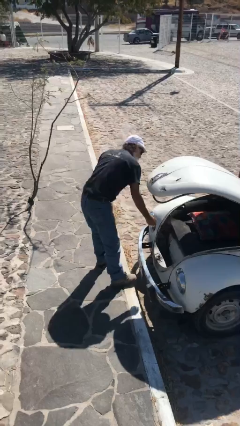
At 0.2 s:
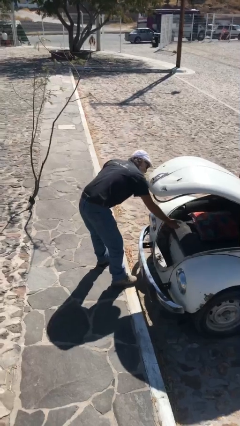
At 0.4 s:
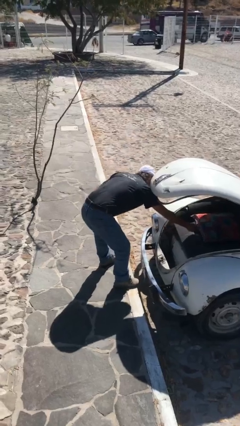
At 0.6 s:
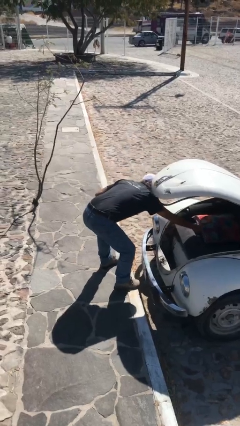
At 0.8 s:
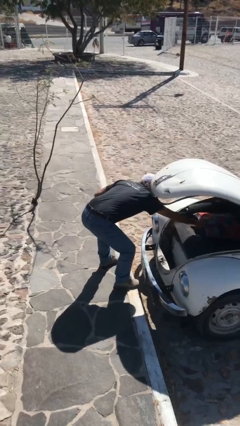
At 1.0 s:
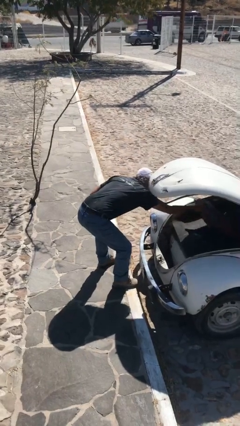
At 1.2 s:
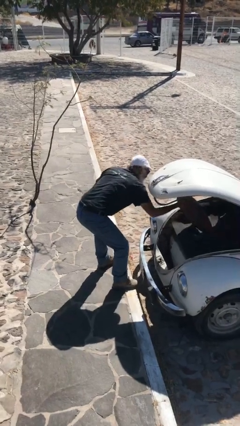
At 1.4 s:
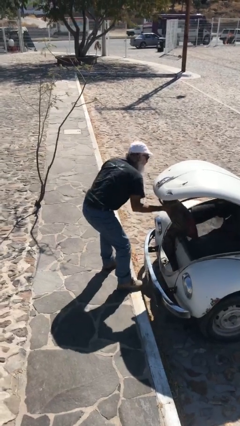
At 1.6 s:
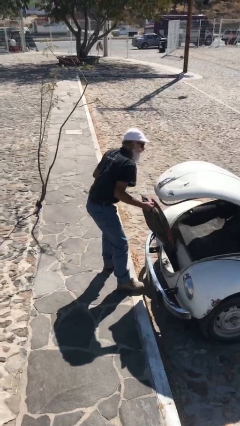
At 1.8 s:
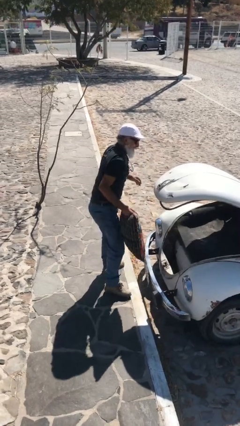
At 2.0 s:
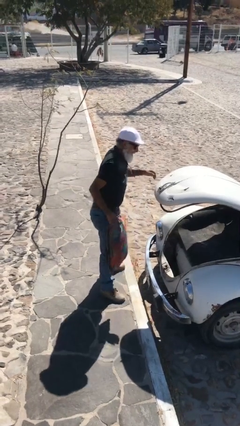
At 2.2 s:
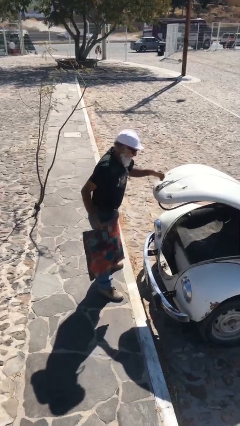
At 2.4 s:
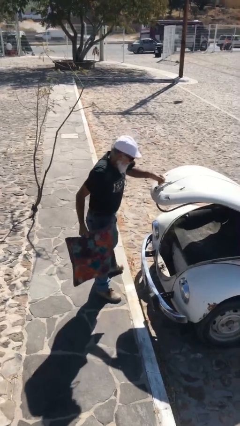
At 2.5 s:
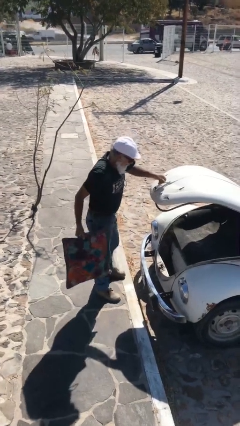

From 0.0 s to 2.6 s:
person unloads car

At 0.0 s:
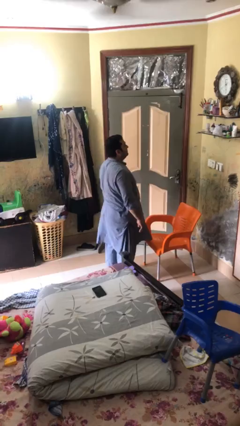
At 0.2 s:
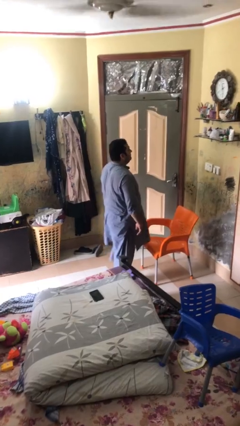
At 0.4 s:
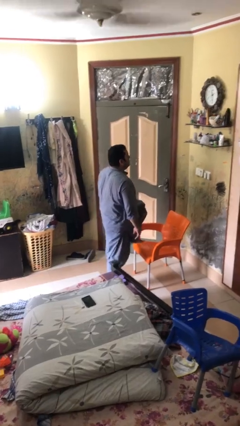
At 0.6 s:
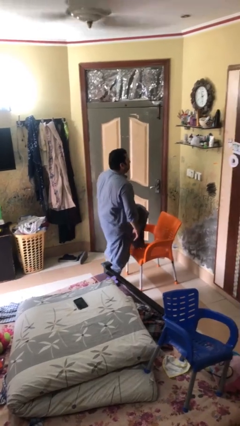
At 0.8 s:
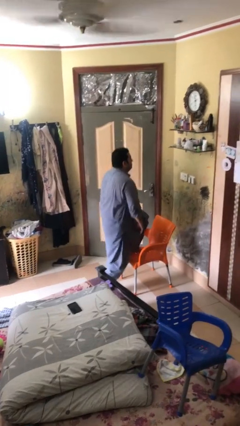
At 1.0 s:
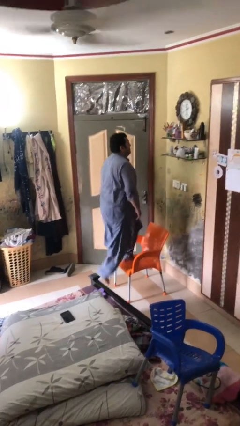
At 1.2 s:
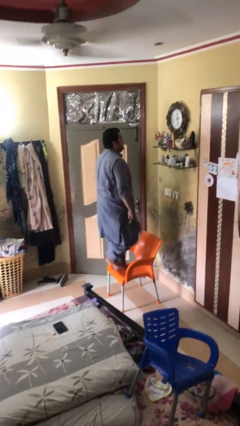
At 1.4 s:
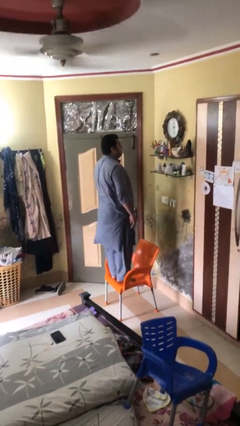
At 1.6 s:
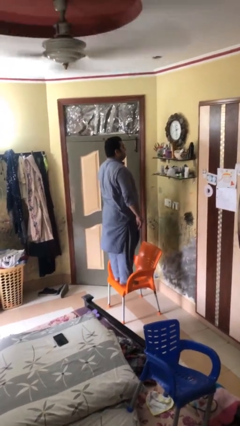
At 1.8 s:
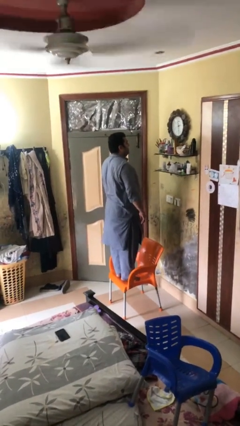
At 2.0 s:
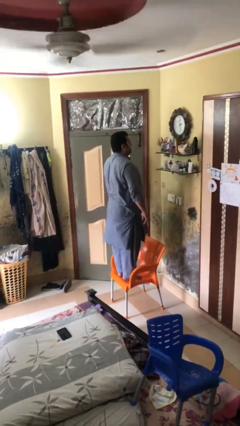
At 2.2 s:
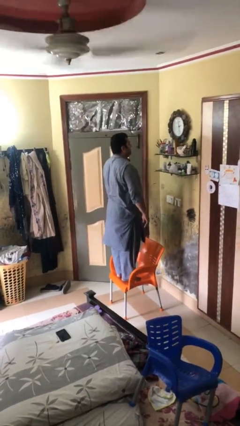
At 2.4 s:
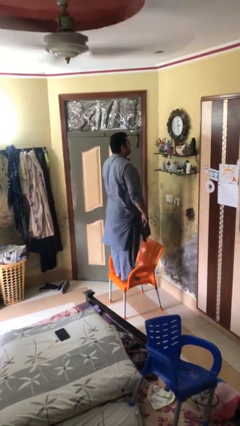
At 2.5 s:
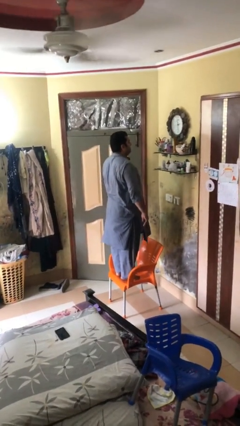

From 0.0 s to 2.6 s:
person climbs on chair

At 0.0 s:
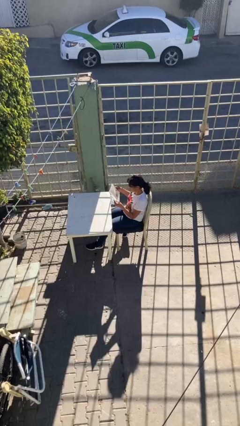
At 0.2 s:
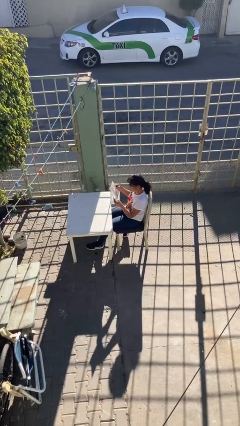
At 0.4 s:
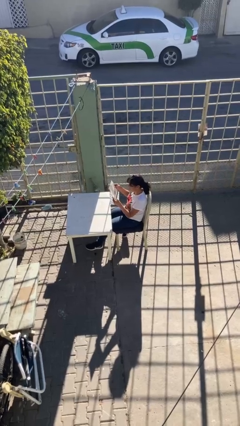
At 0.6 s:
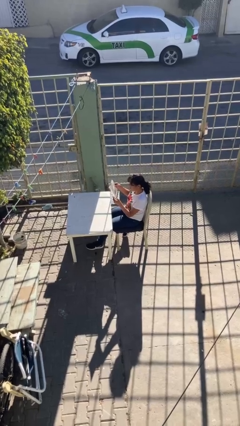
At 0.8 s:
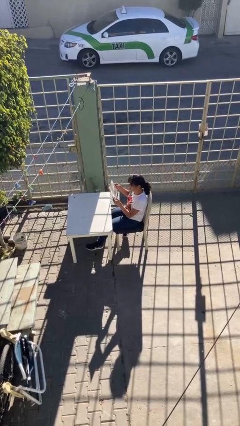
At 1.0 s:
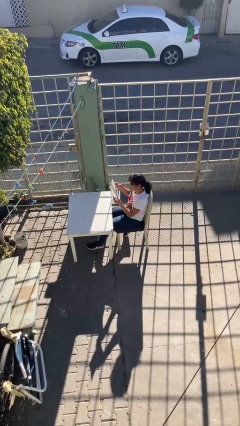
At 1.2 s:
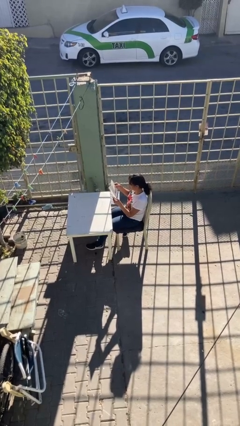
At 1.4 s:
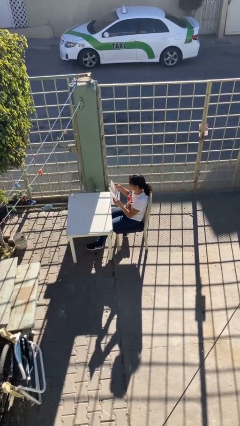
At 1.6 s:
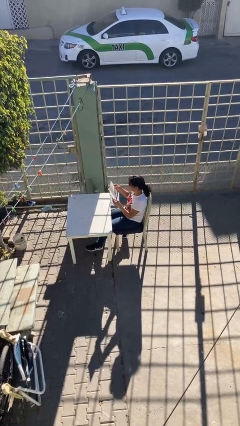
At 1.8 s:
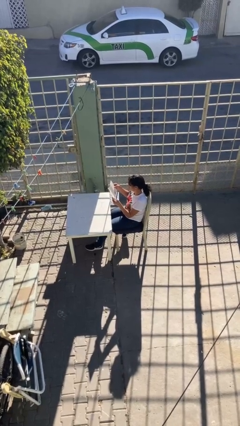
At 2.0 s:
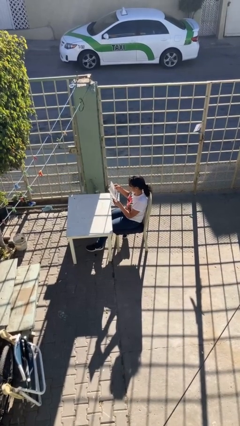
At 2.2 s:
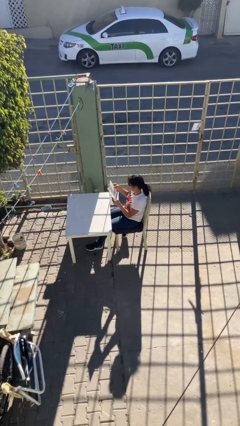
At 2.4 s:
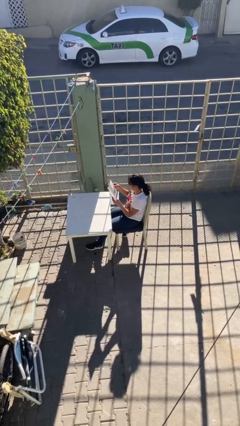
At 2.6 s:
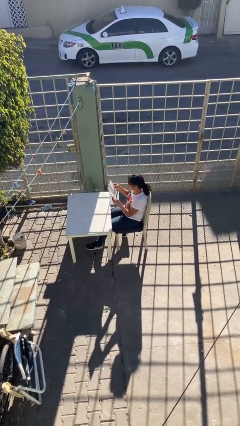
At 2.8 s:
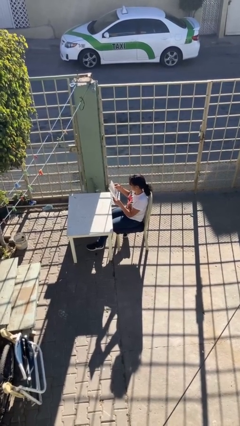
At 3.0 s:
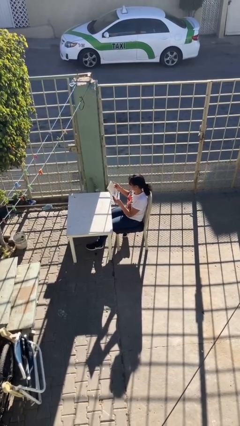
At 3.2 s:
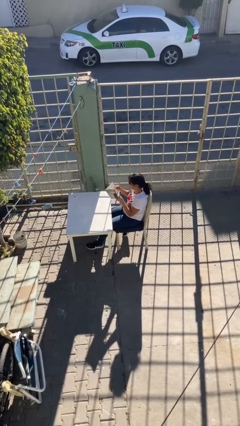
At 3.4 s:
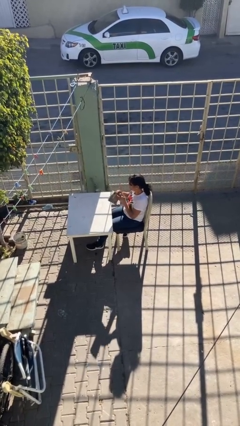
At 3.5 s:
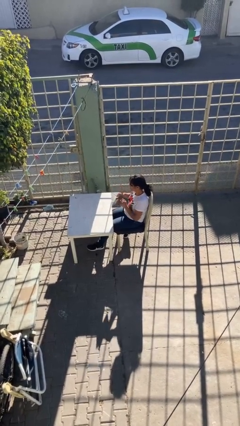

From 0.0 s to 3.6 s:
person reads document

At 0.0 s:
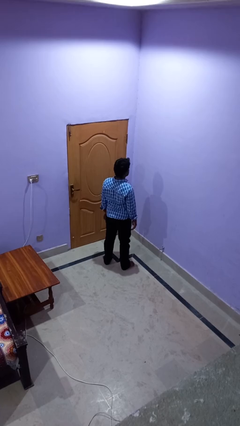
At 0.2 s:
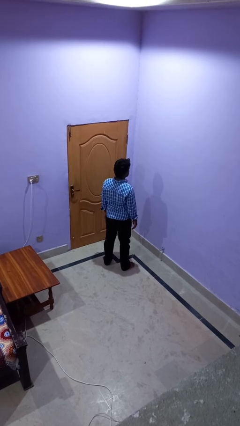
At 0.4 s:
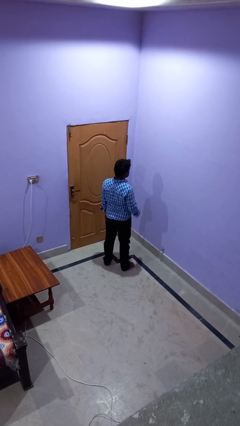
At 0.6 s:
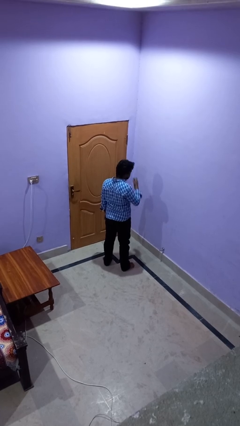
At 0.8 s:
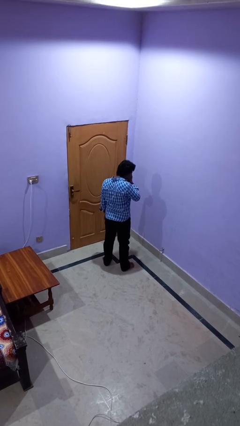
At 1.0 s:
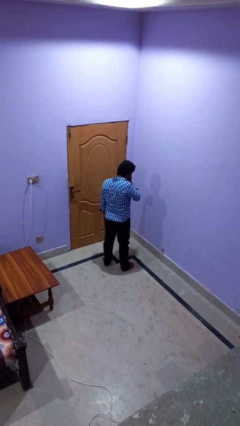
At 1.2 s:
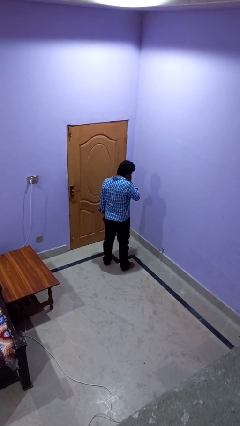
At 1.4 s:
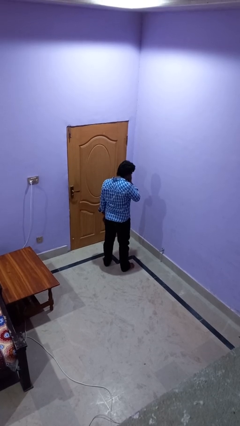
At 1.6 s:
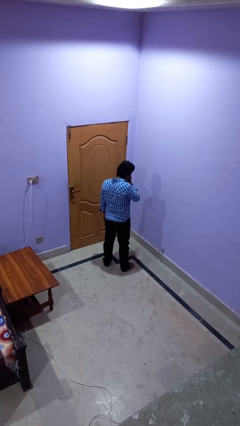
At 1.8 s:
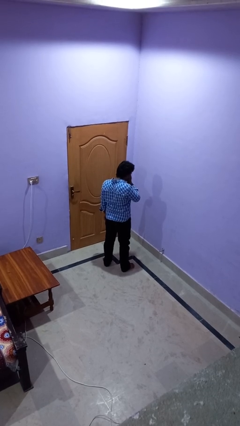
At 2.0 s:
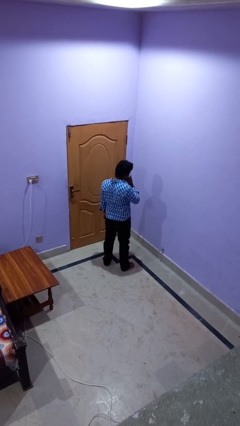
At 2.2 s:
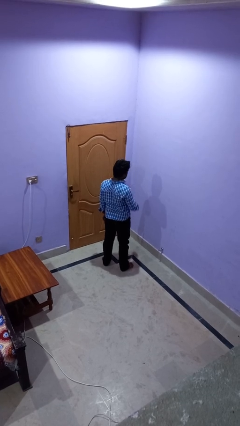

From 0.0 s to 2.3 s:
person sneezes into hand

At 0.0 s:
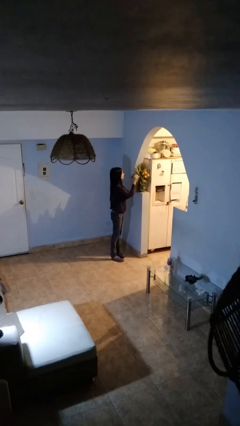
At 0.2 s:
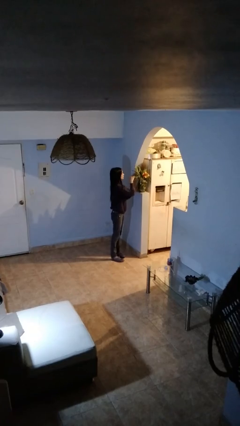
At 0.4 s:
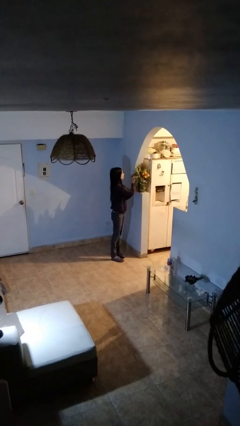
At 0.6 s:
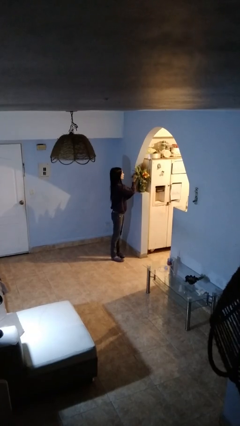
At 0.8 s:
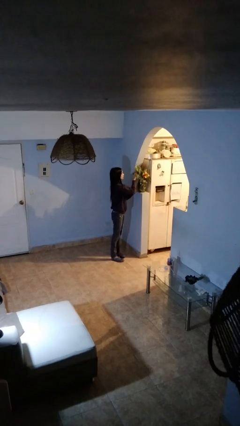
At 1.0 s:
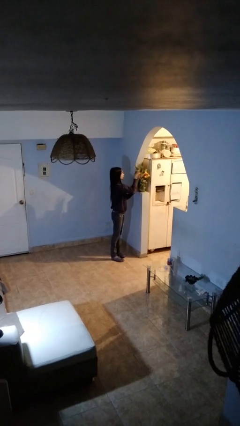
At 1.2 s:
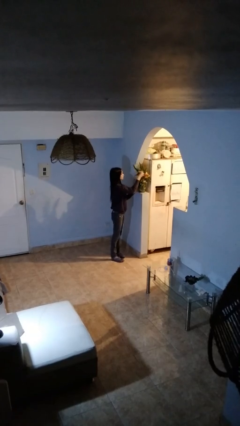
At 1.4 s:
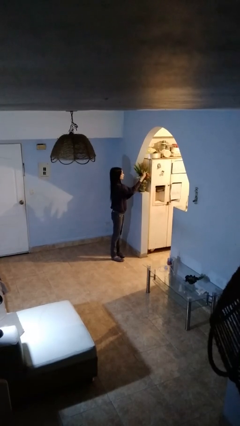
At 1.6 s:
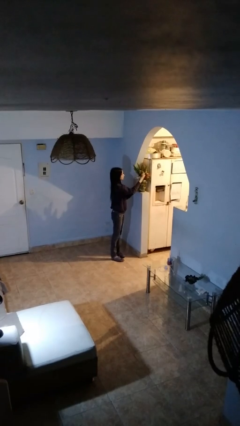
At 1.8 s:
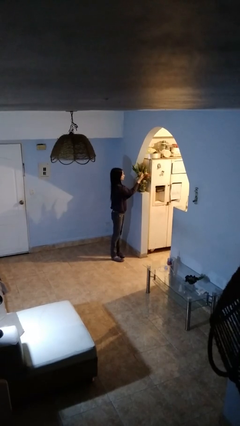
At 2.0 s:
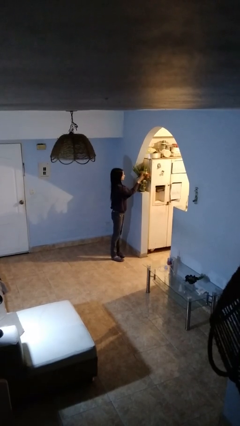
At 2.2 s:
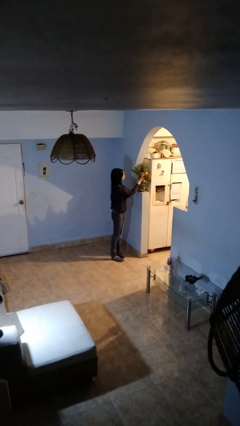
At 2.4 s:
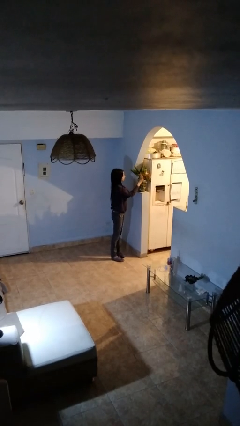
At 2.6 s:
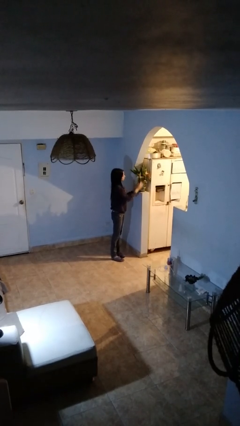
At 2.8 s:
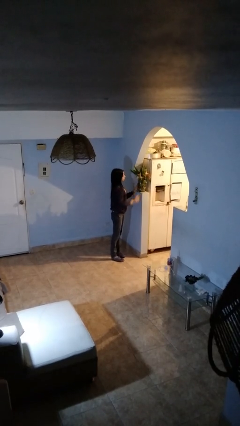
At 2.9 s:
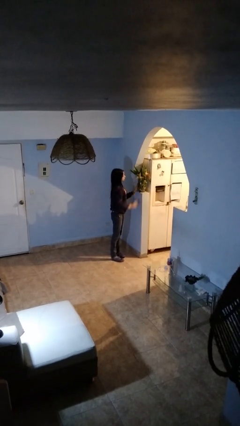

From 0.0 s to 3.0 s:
person arranges flowers in vase

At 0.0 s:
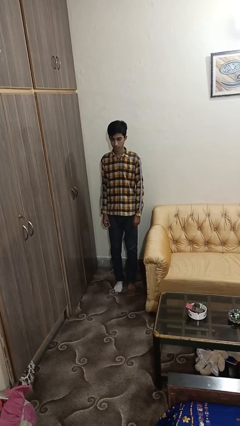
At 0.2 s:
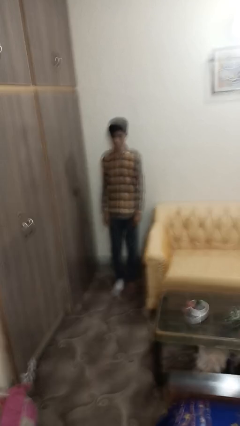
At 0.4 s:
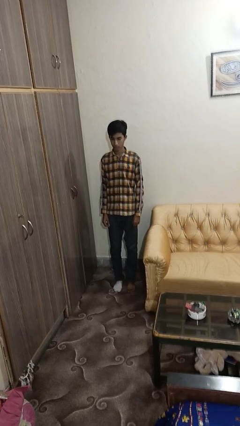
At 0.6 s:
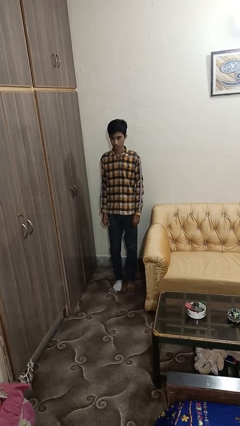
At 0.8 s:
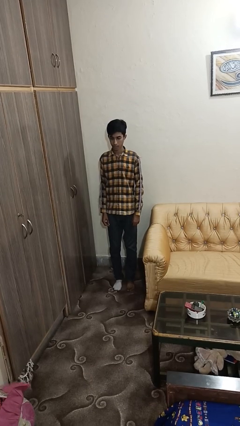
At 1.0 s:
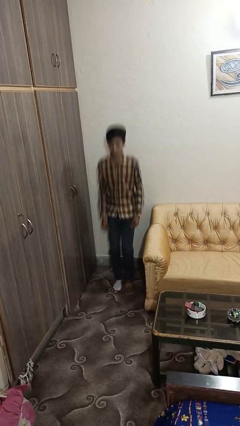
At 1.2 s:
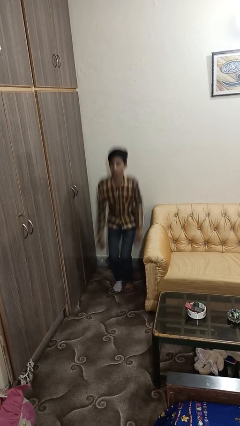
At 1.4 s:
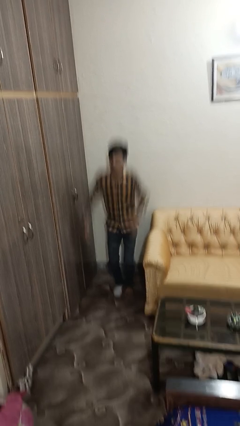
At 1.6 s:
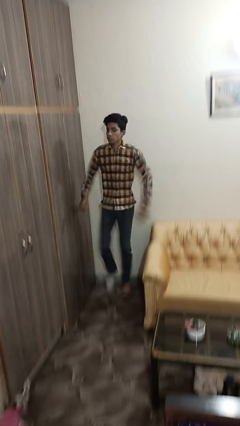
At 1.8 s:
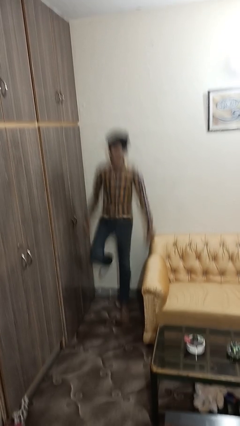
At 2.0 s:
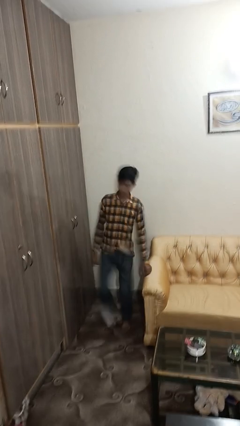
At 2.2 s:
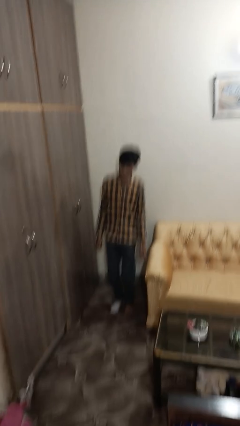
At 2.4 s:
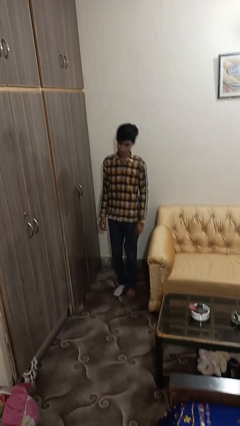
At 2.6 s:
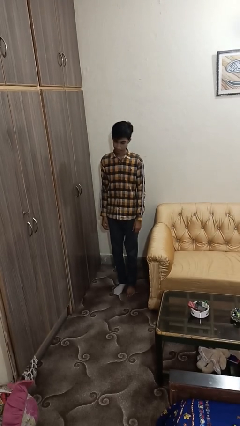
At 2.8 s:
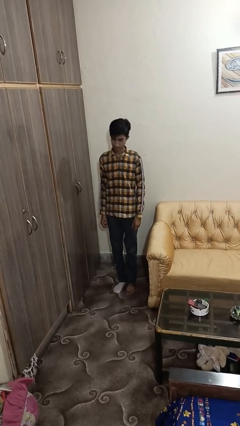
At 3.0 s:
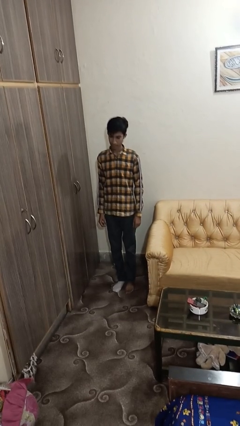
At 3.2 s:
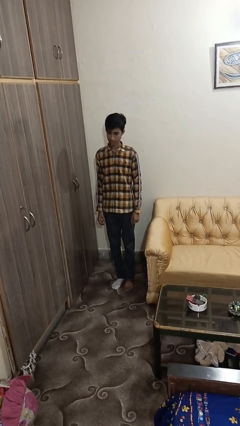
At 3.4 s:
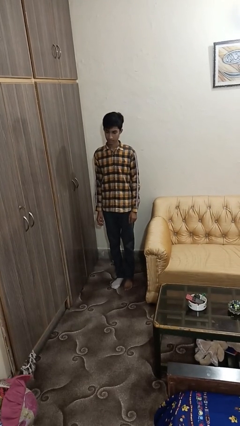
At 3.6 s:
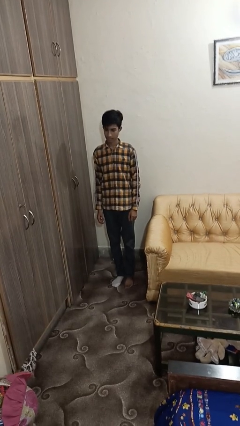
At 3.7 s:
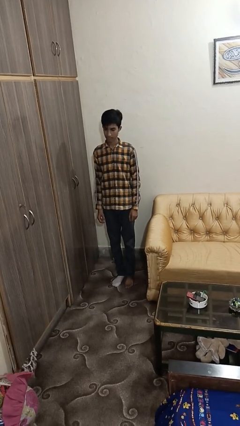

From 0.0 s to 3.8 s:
person jumps
